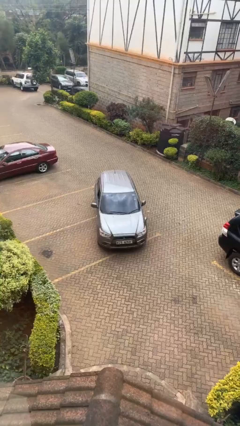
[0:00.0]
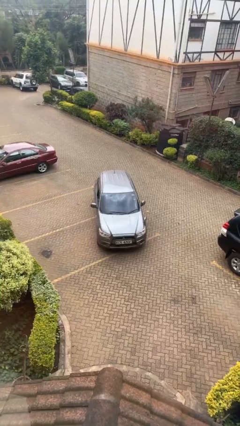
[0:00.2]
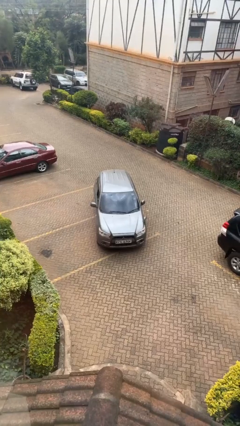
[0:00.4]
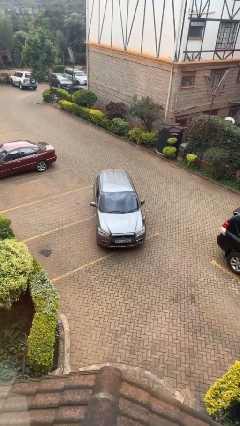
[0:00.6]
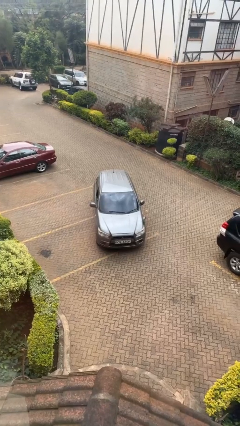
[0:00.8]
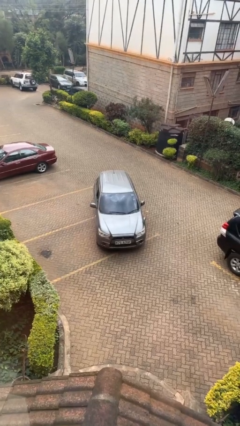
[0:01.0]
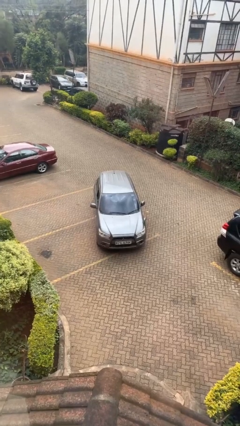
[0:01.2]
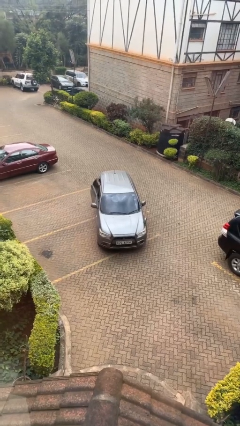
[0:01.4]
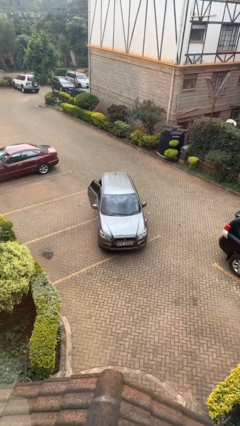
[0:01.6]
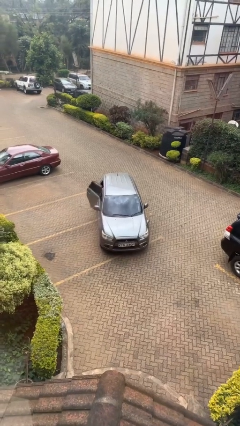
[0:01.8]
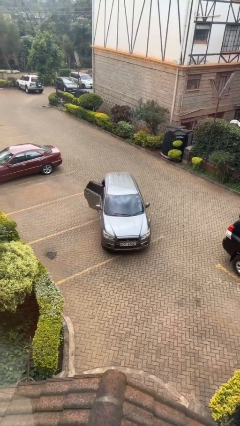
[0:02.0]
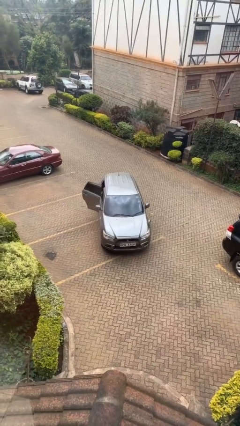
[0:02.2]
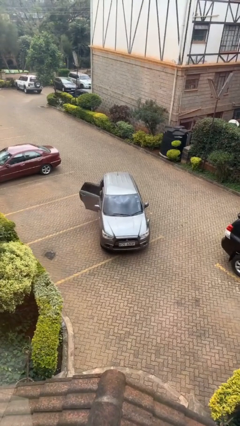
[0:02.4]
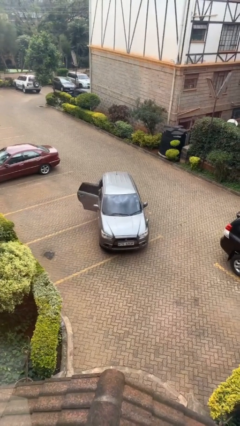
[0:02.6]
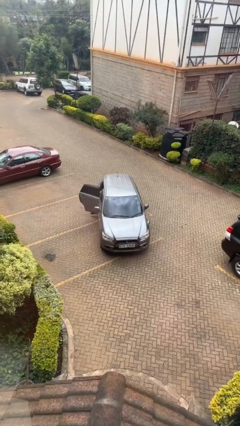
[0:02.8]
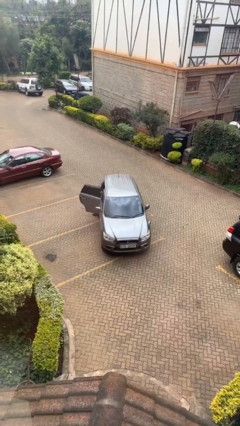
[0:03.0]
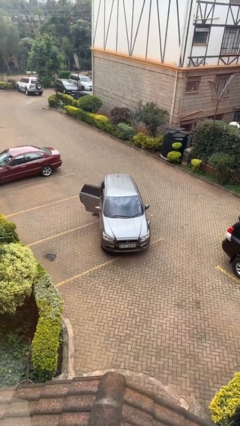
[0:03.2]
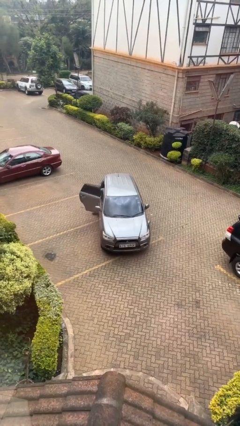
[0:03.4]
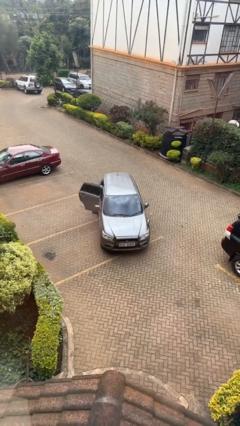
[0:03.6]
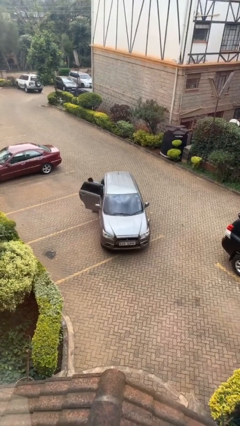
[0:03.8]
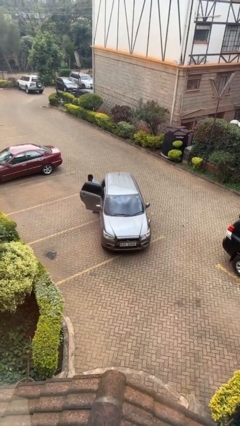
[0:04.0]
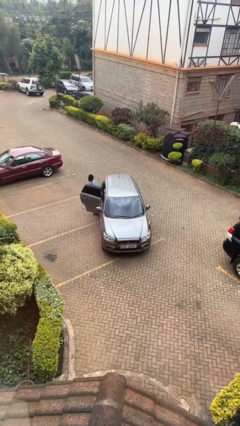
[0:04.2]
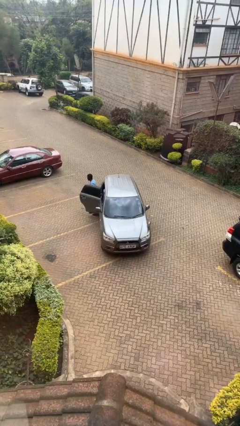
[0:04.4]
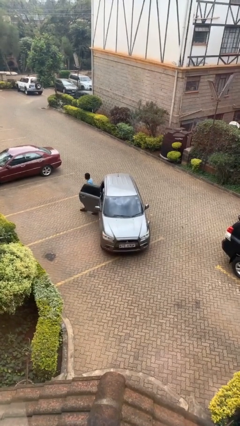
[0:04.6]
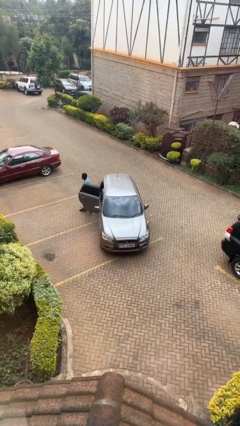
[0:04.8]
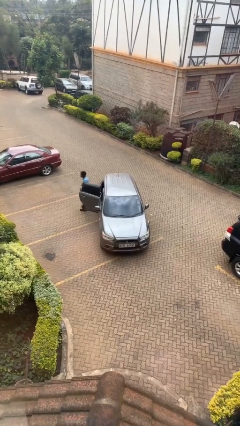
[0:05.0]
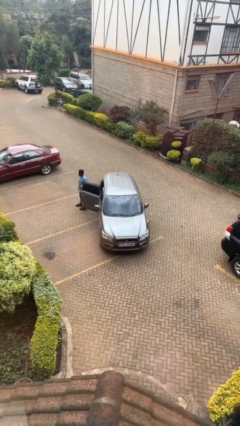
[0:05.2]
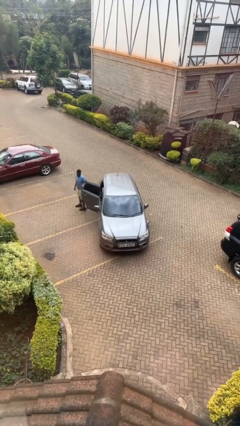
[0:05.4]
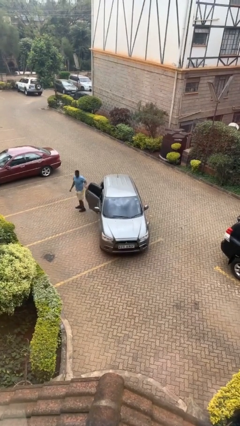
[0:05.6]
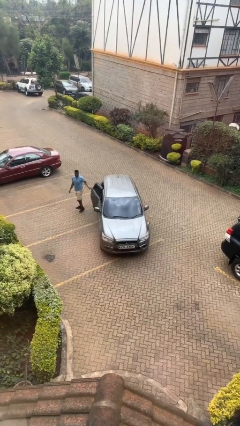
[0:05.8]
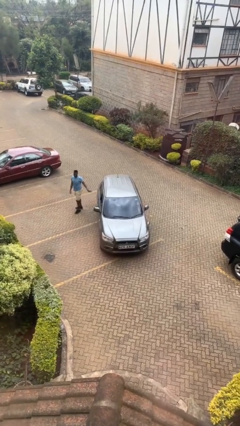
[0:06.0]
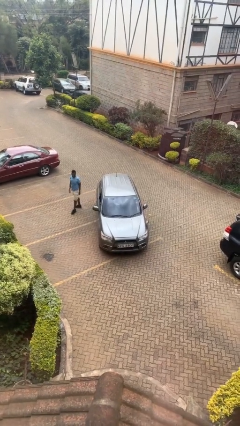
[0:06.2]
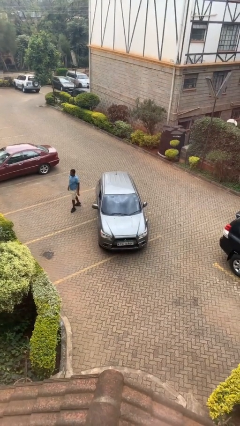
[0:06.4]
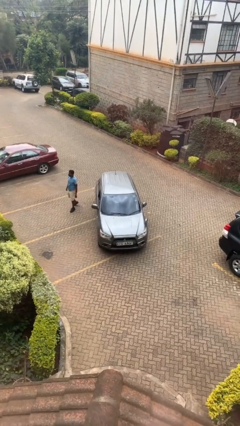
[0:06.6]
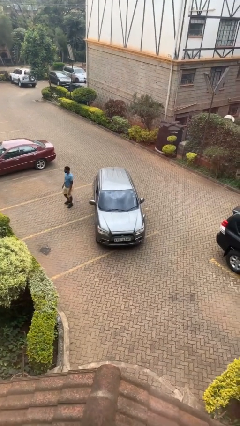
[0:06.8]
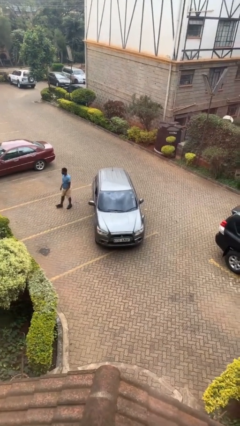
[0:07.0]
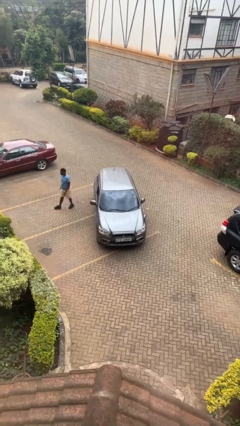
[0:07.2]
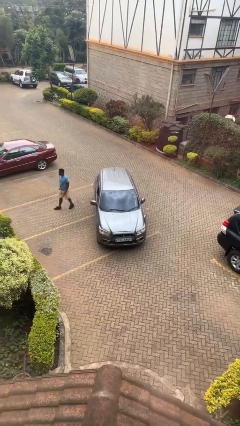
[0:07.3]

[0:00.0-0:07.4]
car drops off person

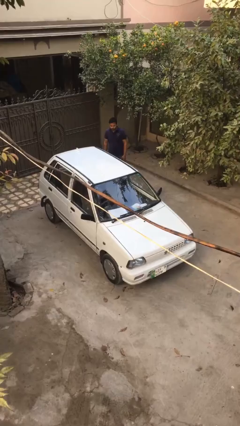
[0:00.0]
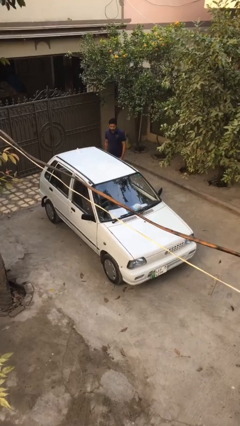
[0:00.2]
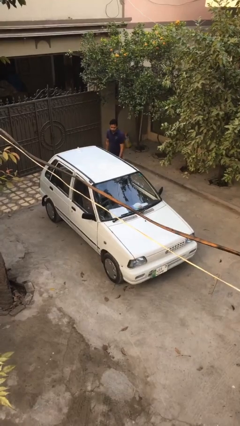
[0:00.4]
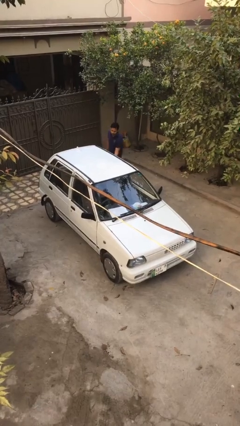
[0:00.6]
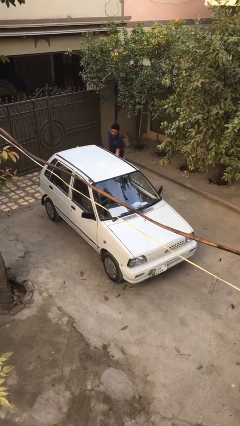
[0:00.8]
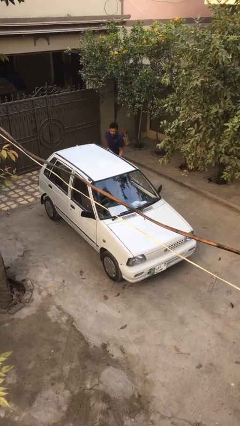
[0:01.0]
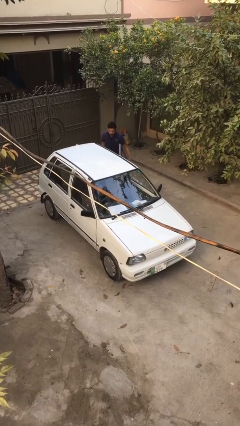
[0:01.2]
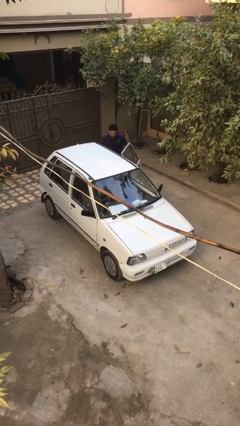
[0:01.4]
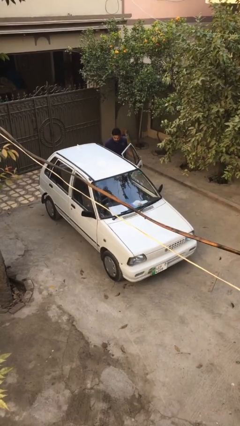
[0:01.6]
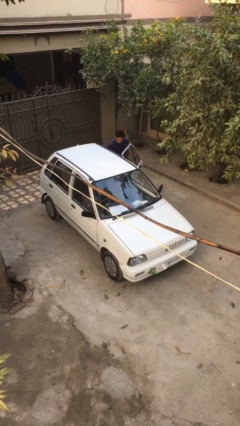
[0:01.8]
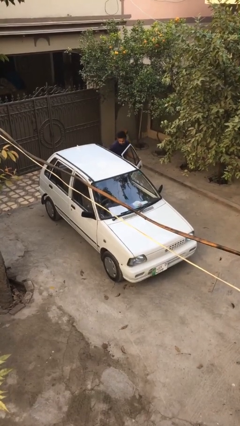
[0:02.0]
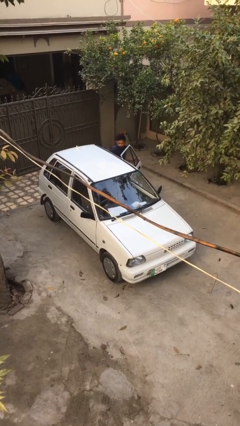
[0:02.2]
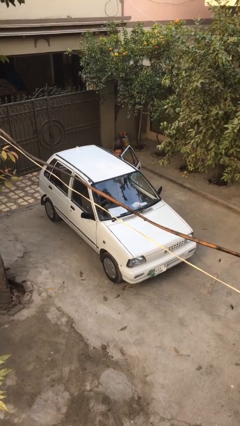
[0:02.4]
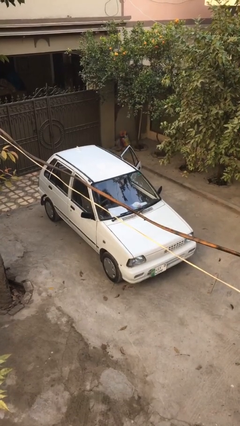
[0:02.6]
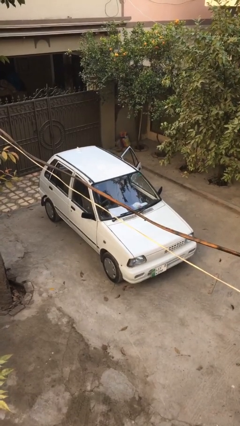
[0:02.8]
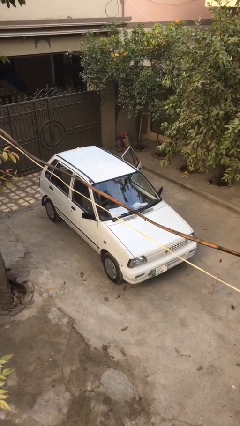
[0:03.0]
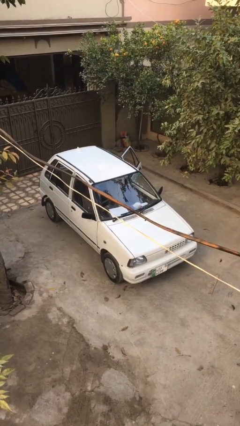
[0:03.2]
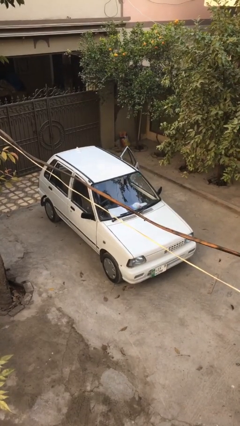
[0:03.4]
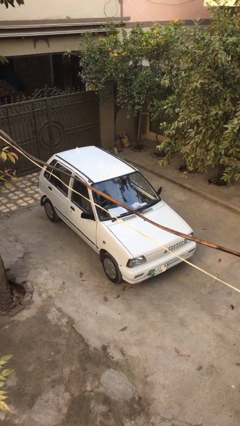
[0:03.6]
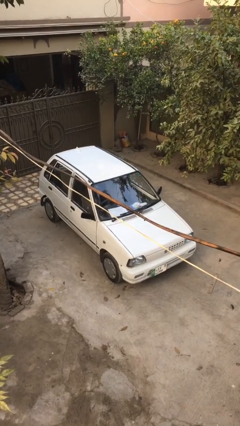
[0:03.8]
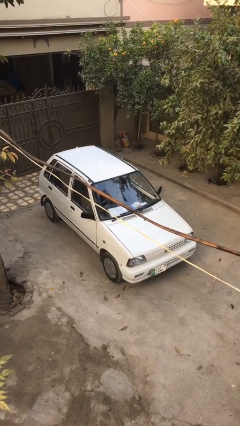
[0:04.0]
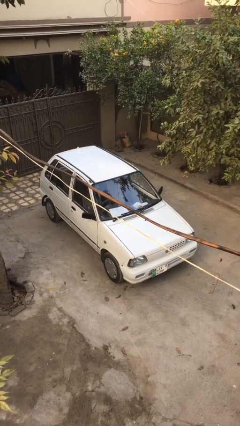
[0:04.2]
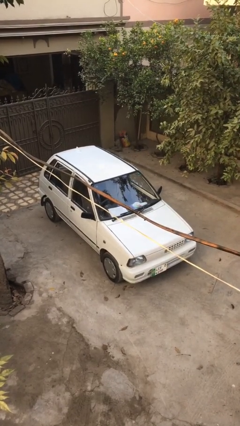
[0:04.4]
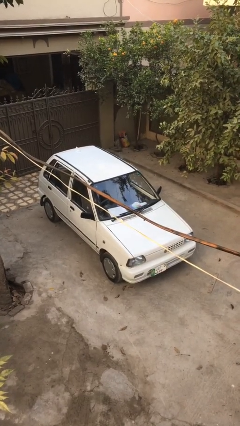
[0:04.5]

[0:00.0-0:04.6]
car picks up person

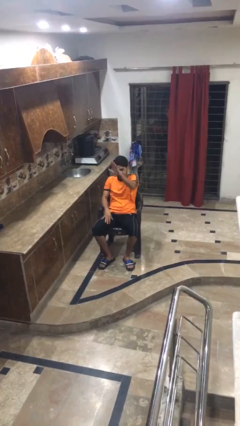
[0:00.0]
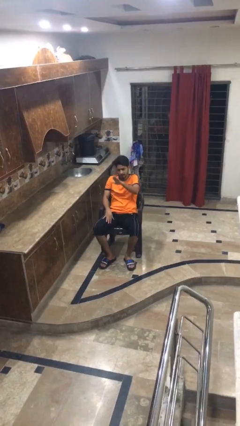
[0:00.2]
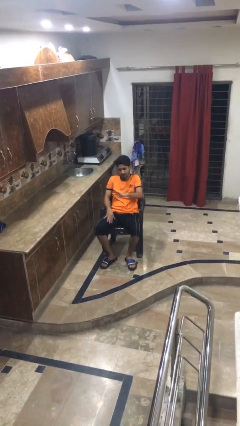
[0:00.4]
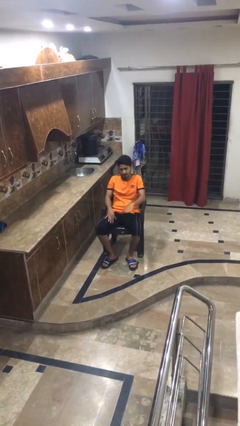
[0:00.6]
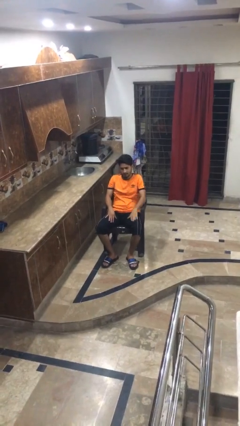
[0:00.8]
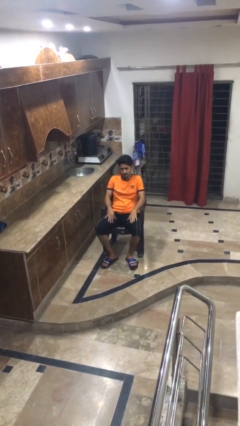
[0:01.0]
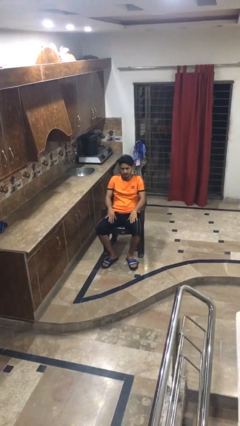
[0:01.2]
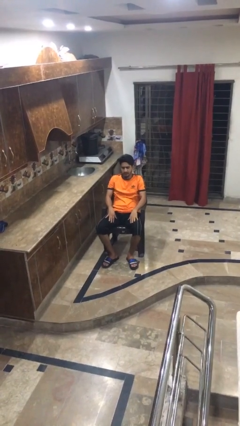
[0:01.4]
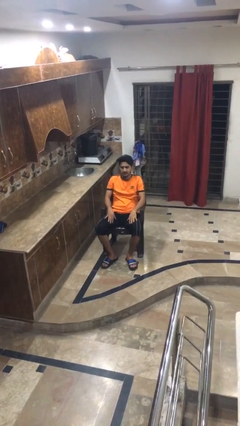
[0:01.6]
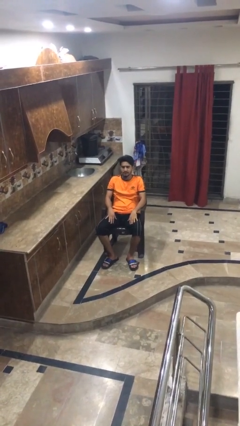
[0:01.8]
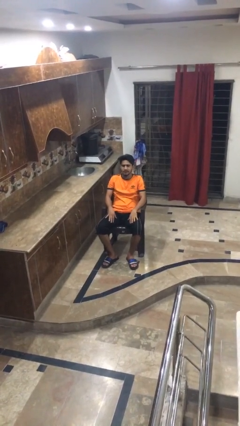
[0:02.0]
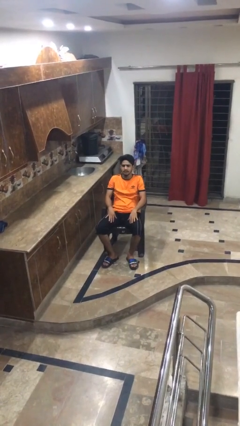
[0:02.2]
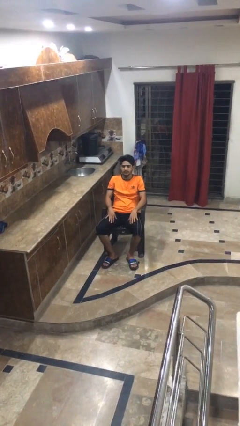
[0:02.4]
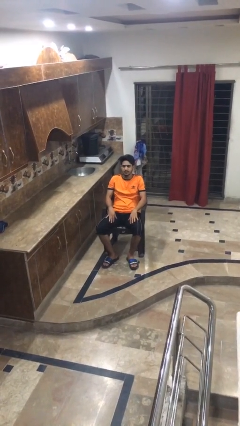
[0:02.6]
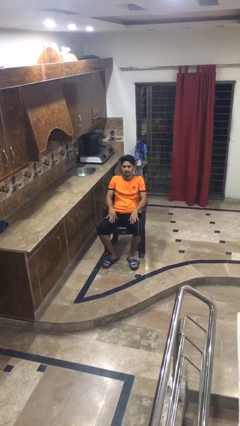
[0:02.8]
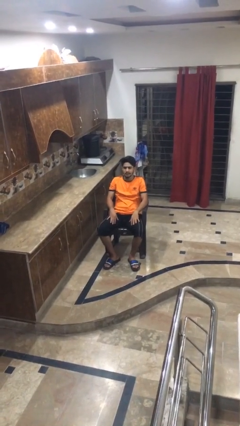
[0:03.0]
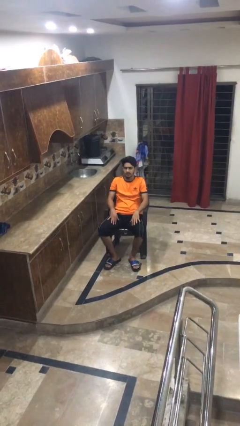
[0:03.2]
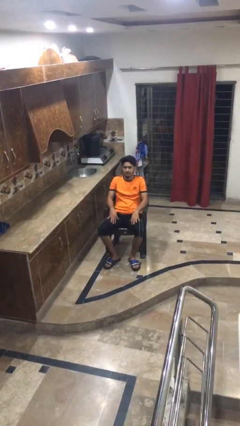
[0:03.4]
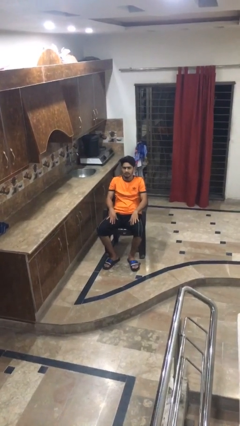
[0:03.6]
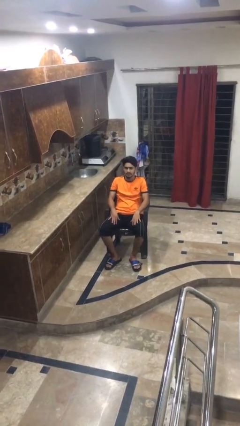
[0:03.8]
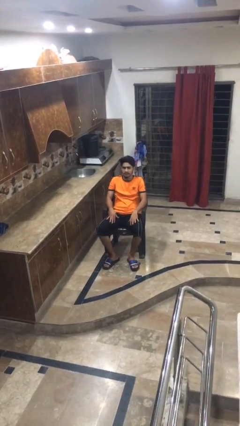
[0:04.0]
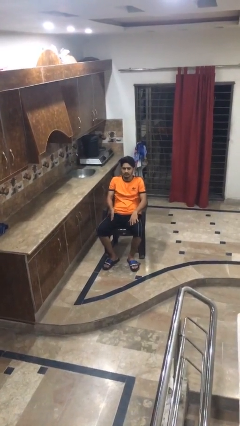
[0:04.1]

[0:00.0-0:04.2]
person gestures swipe down

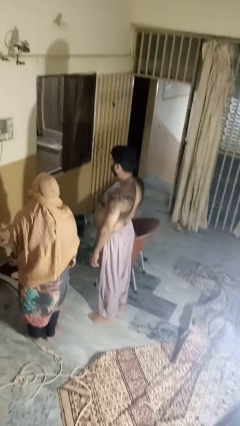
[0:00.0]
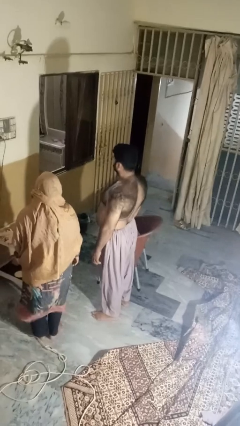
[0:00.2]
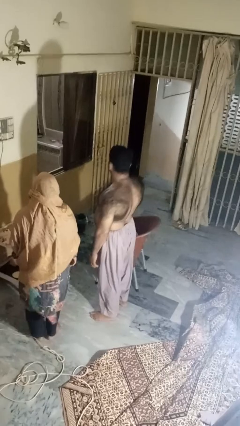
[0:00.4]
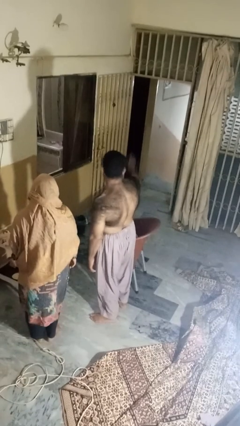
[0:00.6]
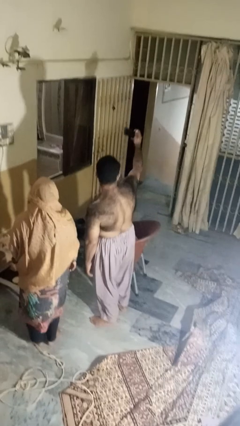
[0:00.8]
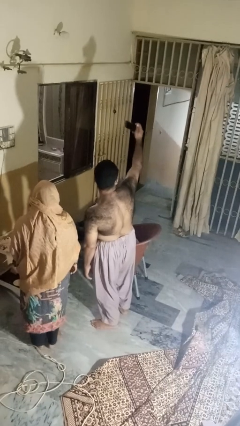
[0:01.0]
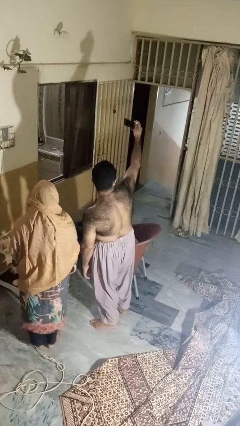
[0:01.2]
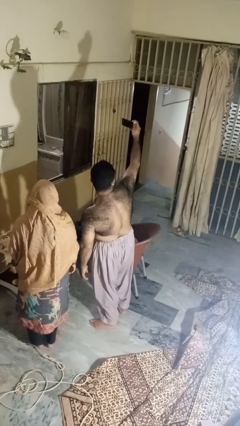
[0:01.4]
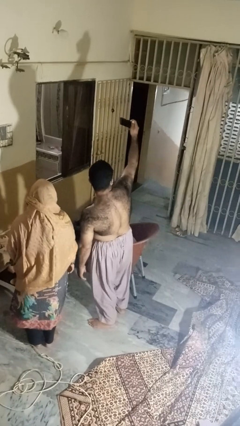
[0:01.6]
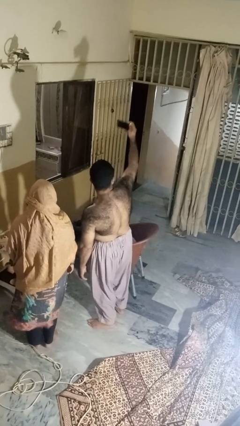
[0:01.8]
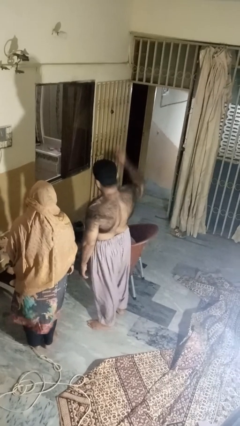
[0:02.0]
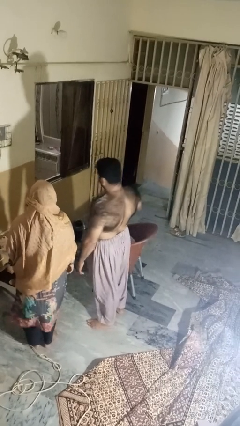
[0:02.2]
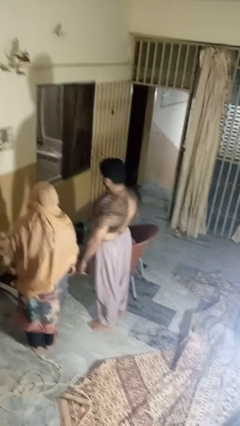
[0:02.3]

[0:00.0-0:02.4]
person takes selfie with person
